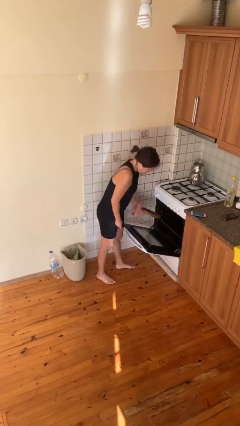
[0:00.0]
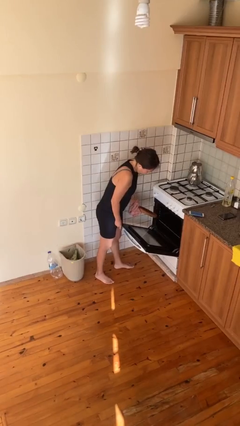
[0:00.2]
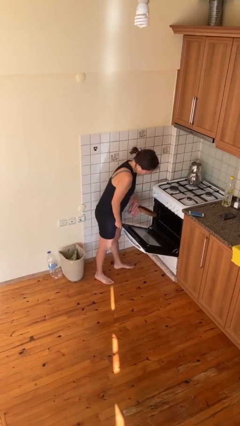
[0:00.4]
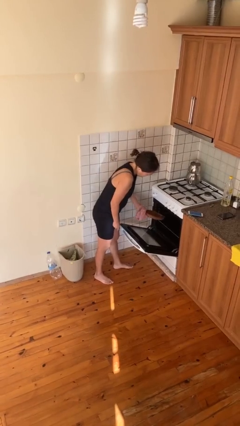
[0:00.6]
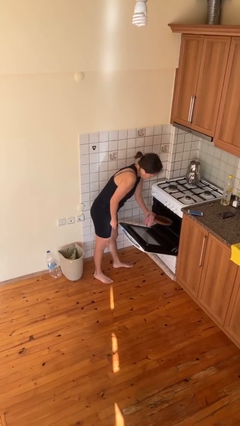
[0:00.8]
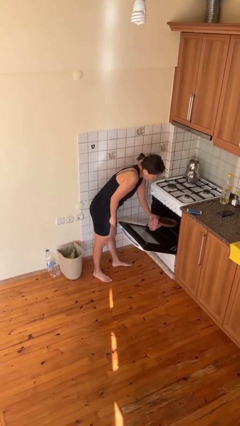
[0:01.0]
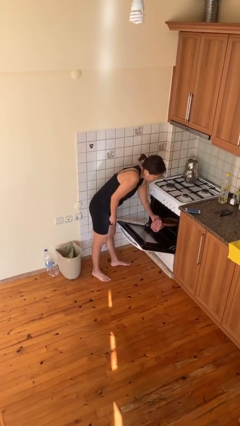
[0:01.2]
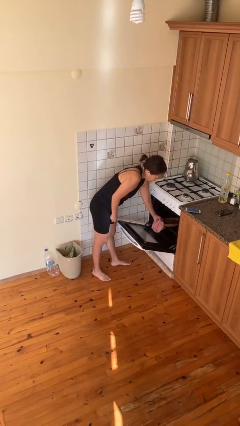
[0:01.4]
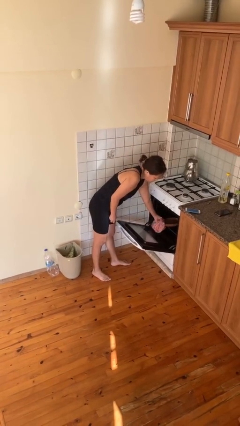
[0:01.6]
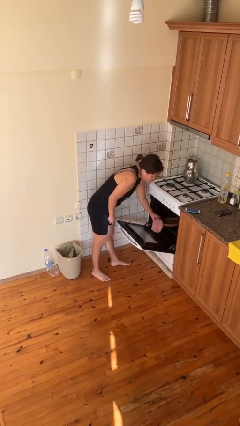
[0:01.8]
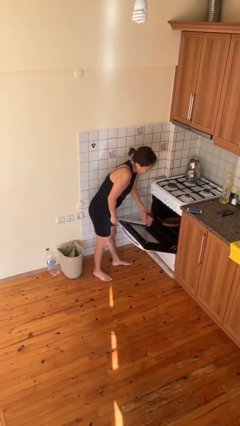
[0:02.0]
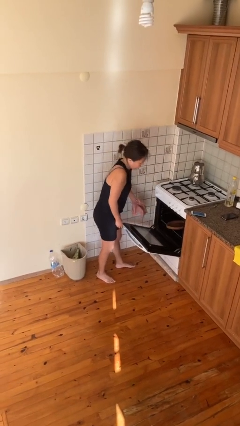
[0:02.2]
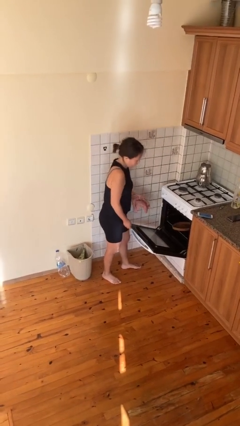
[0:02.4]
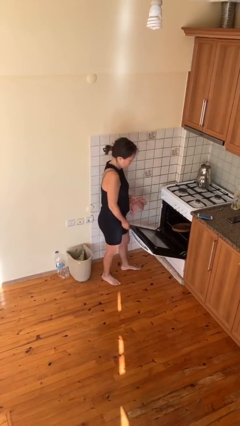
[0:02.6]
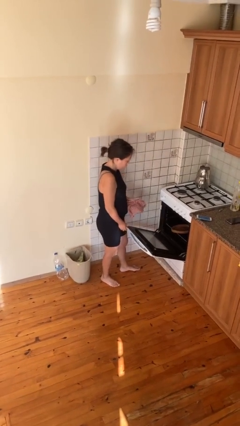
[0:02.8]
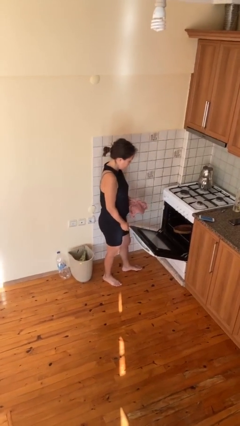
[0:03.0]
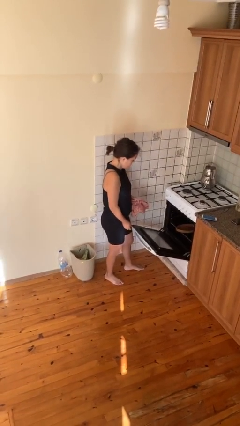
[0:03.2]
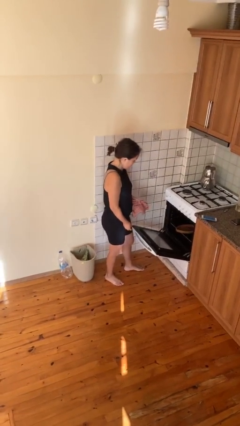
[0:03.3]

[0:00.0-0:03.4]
person puts object into oven

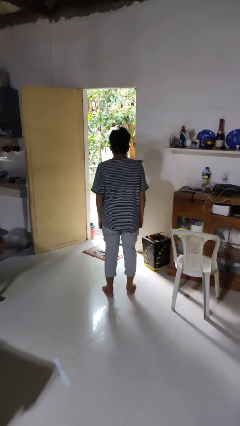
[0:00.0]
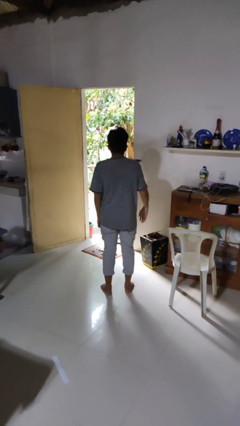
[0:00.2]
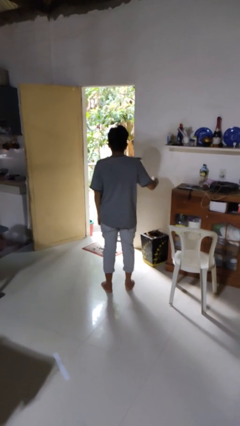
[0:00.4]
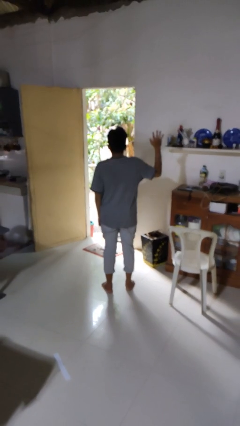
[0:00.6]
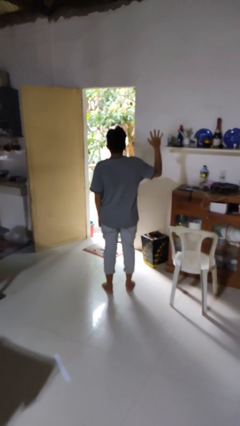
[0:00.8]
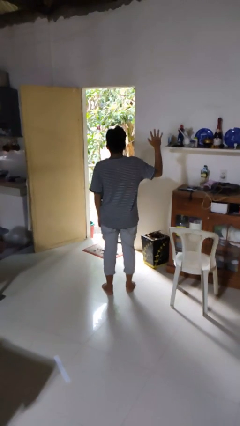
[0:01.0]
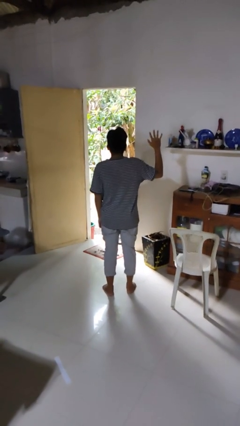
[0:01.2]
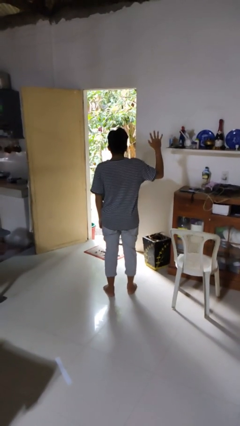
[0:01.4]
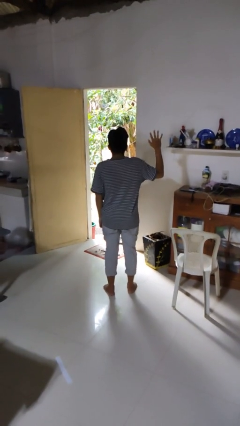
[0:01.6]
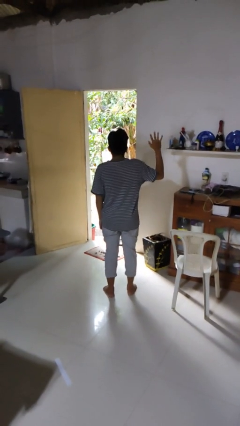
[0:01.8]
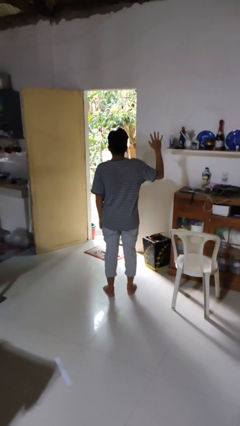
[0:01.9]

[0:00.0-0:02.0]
person gestures number five

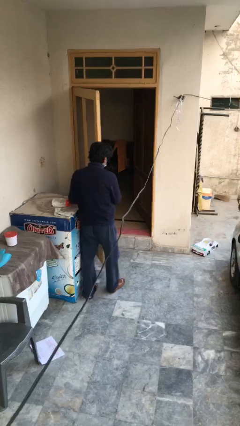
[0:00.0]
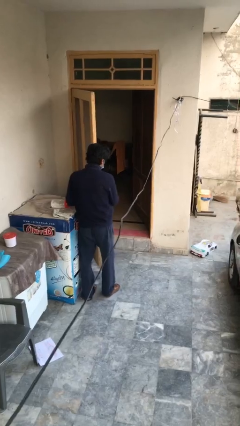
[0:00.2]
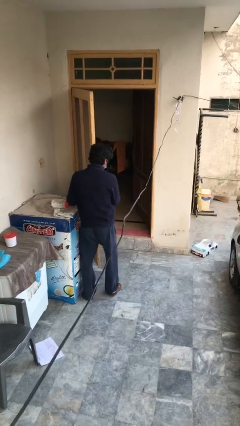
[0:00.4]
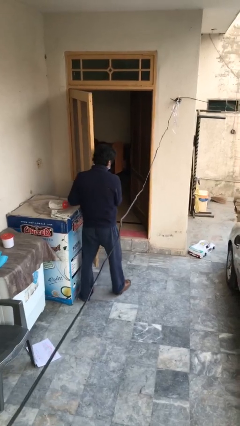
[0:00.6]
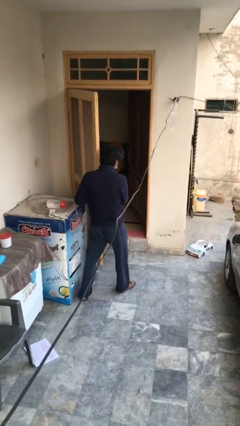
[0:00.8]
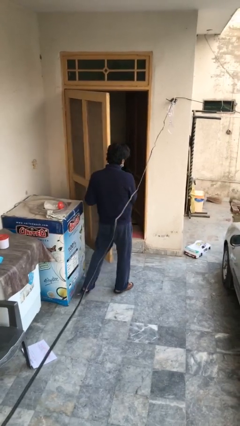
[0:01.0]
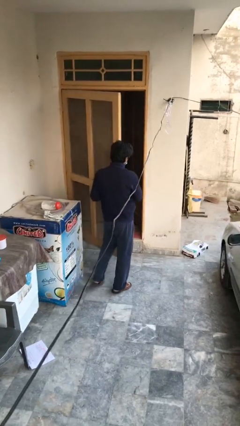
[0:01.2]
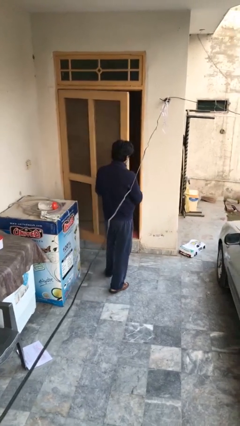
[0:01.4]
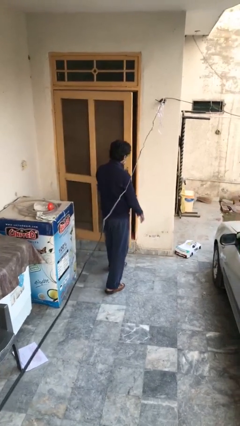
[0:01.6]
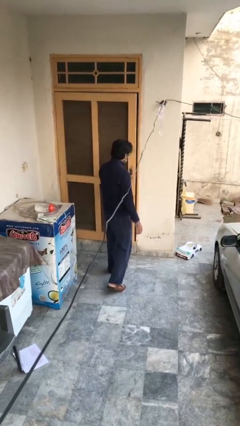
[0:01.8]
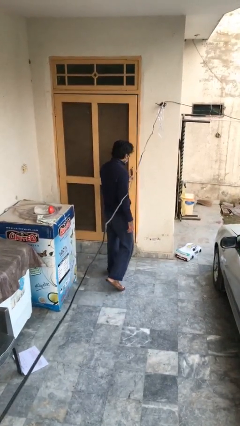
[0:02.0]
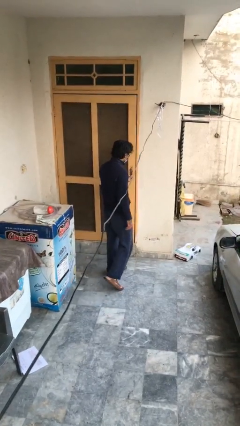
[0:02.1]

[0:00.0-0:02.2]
person closes facility door

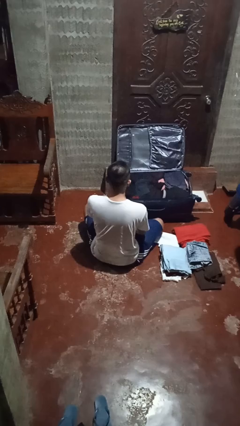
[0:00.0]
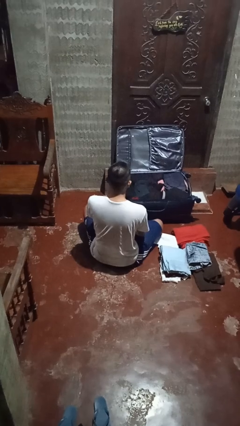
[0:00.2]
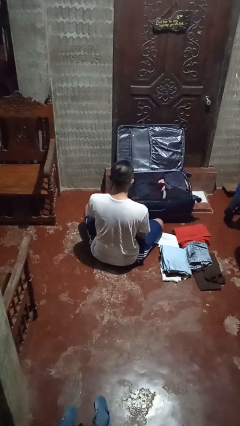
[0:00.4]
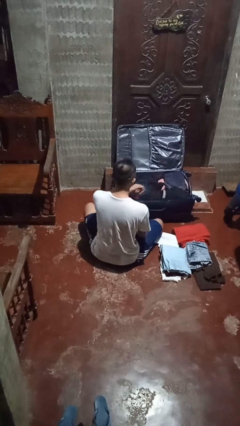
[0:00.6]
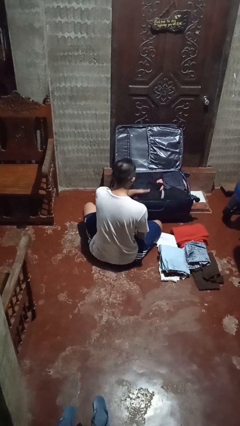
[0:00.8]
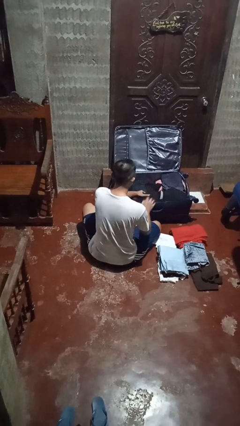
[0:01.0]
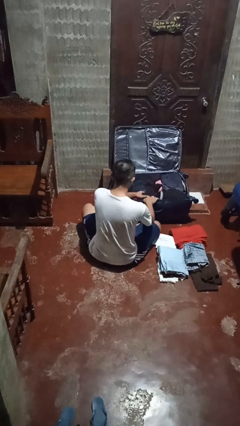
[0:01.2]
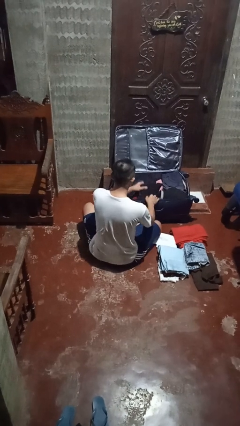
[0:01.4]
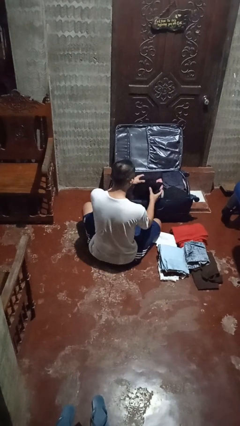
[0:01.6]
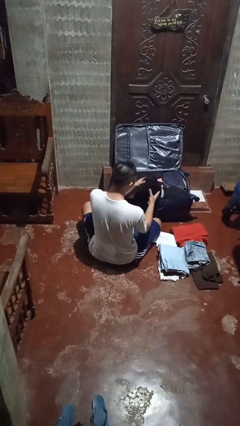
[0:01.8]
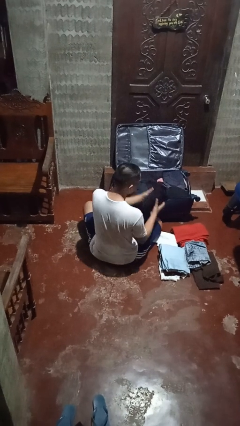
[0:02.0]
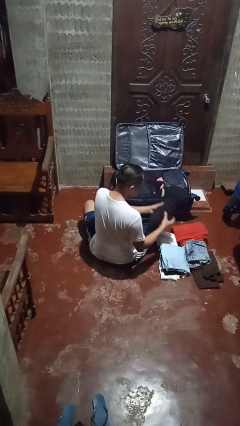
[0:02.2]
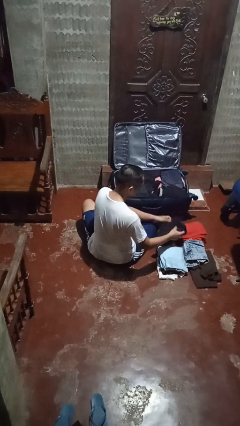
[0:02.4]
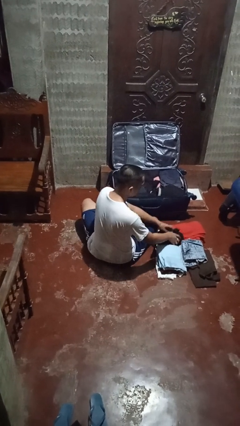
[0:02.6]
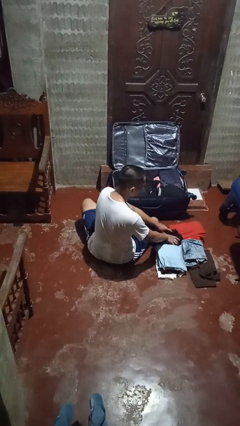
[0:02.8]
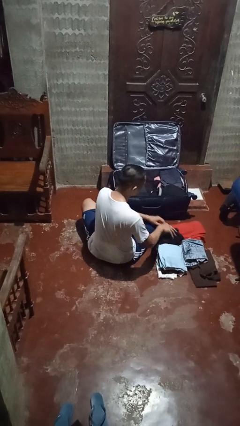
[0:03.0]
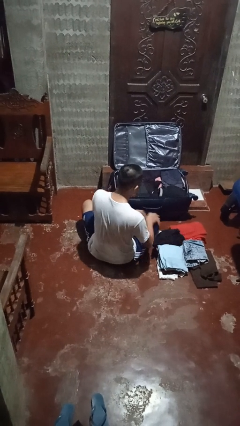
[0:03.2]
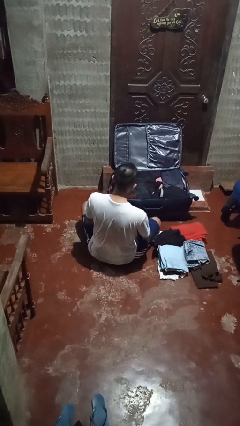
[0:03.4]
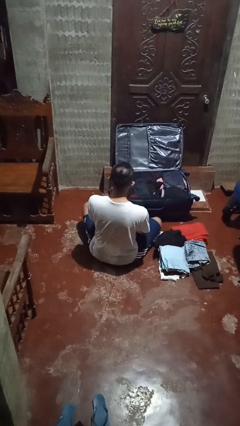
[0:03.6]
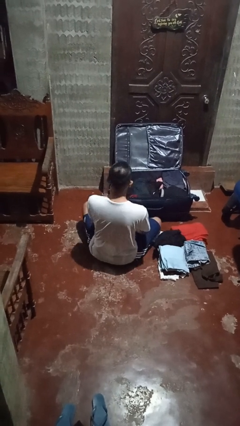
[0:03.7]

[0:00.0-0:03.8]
person unloads clothes from suitcase

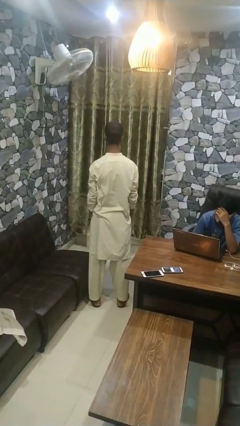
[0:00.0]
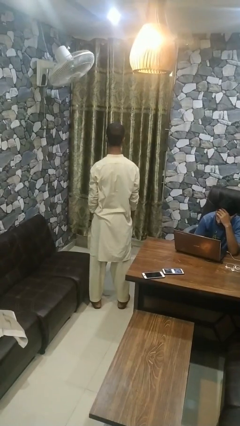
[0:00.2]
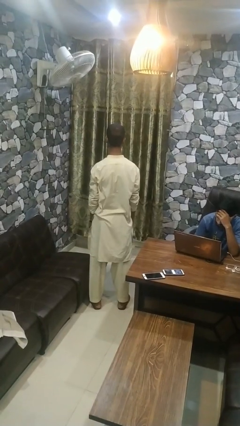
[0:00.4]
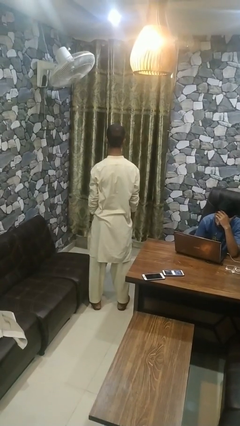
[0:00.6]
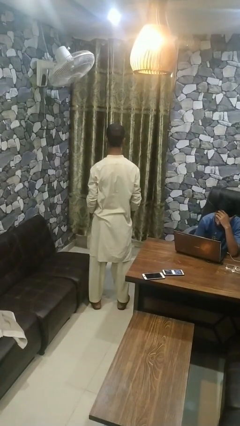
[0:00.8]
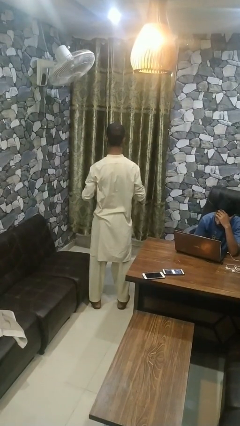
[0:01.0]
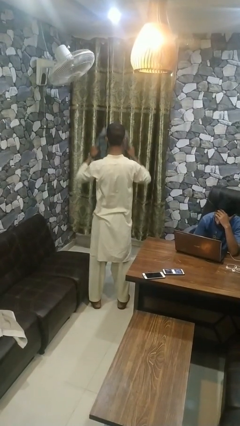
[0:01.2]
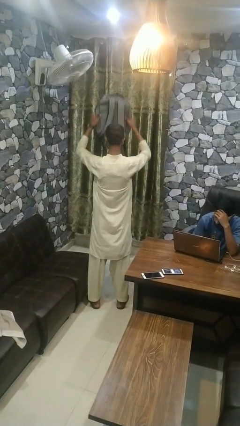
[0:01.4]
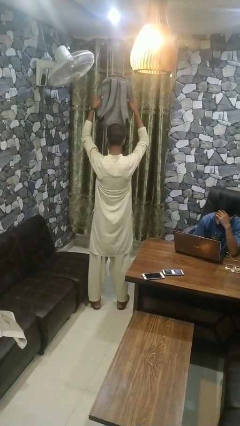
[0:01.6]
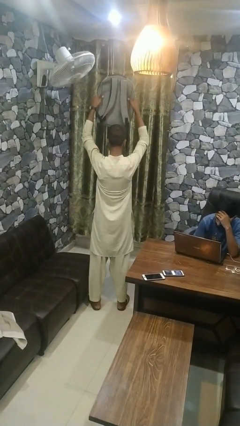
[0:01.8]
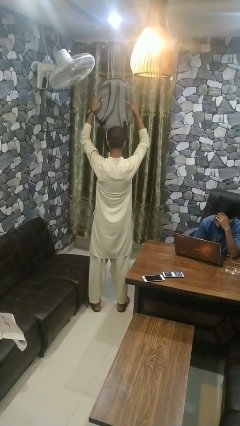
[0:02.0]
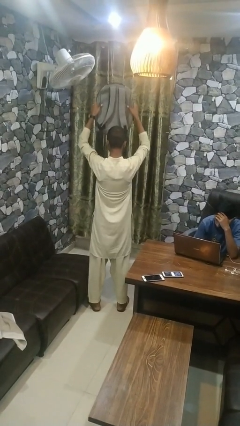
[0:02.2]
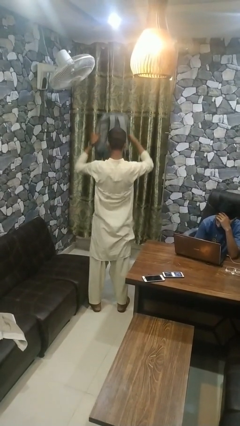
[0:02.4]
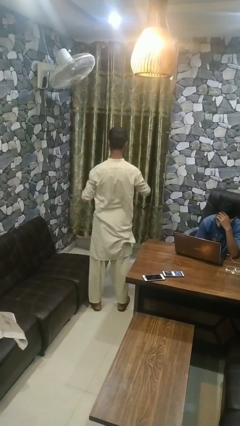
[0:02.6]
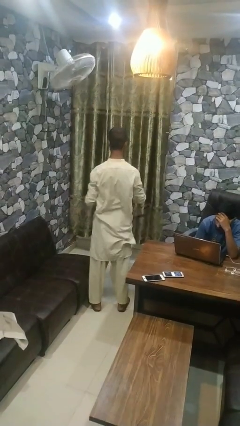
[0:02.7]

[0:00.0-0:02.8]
person holds object above head

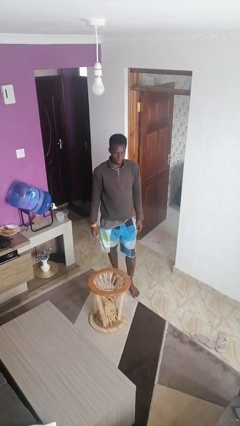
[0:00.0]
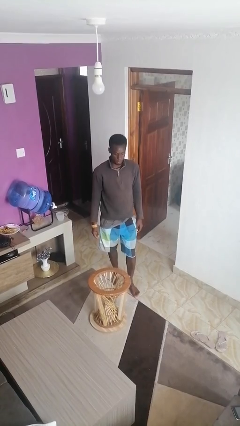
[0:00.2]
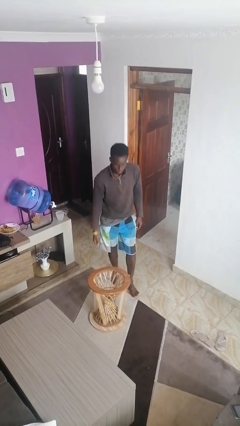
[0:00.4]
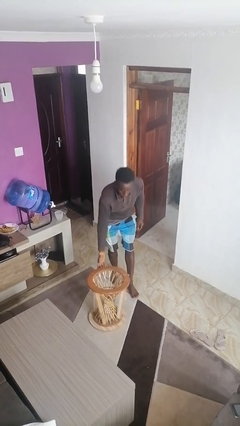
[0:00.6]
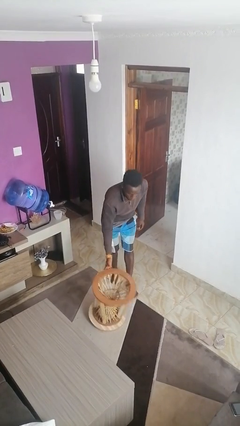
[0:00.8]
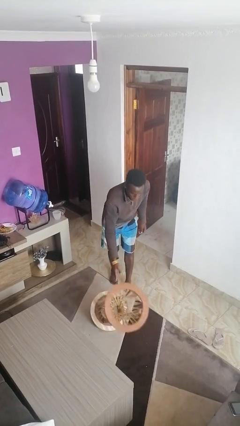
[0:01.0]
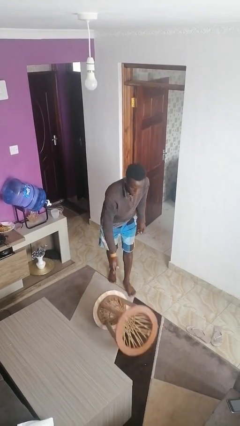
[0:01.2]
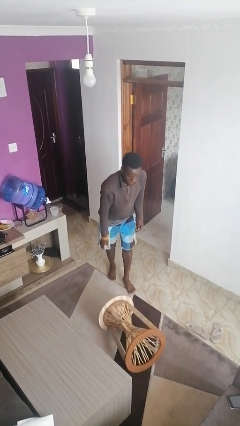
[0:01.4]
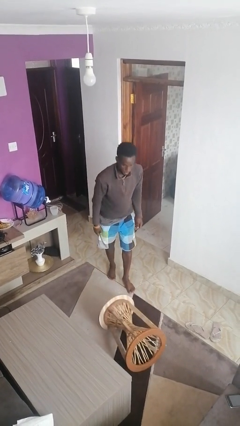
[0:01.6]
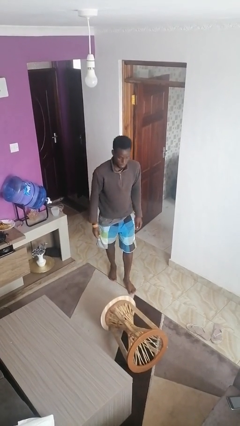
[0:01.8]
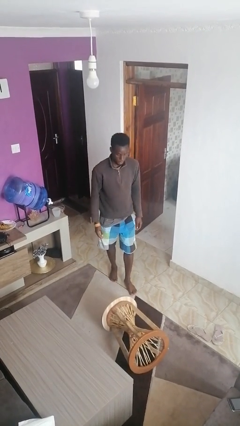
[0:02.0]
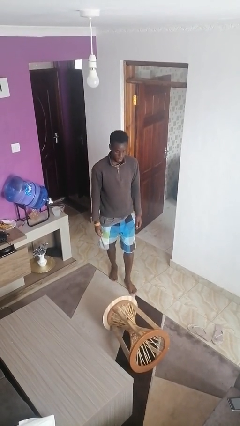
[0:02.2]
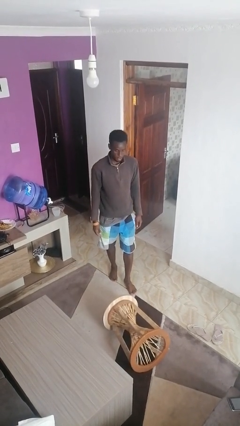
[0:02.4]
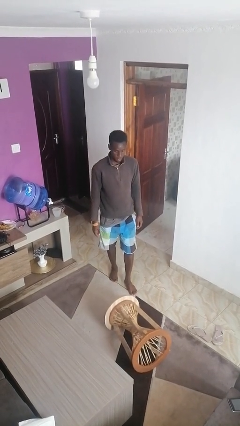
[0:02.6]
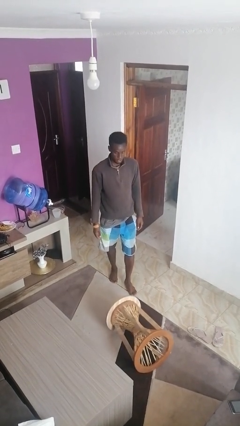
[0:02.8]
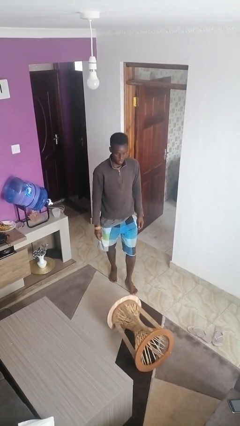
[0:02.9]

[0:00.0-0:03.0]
person knocks over furniture

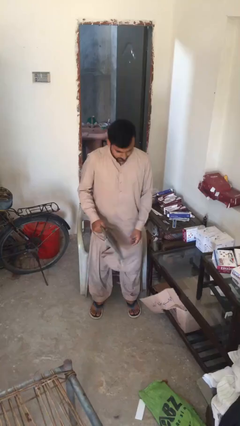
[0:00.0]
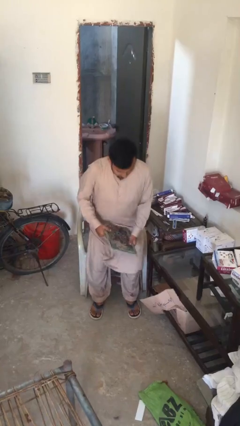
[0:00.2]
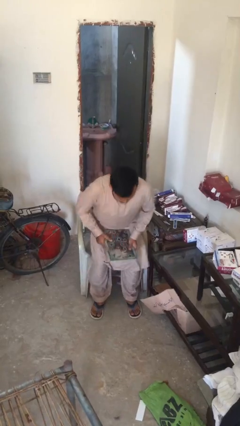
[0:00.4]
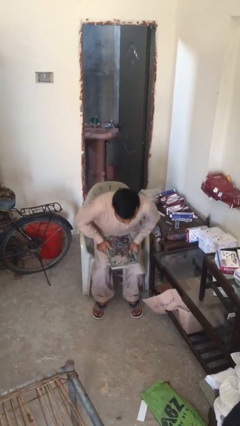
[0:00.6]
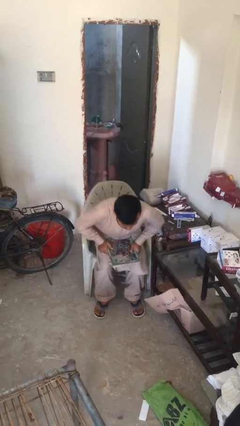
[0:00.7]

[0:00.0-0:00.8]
person sits down
